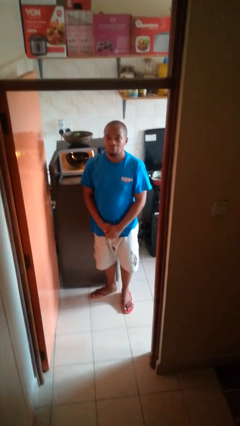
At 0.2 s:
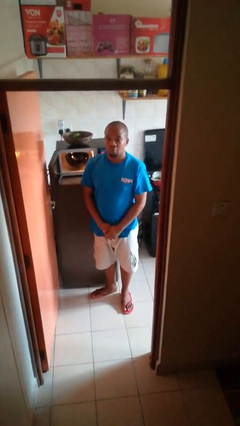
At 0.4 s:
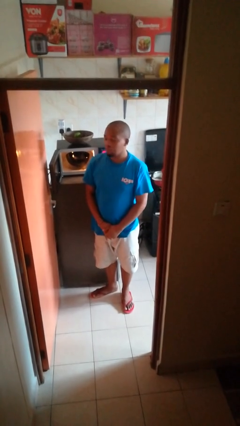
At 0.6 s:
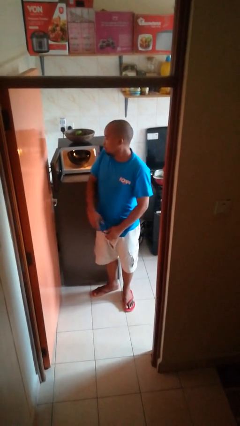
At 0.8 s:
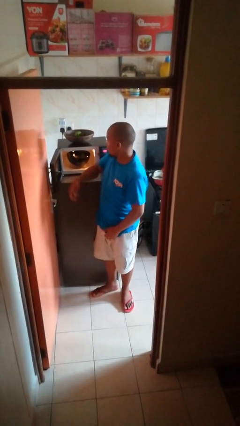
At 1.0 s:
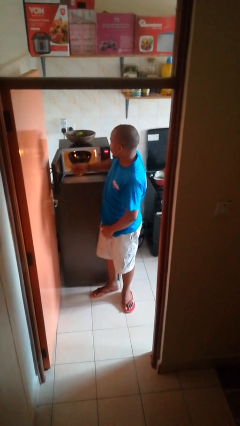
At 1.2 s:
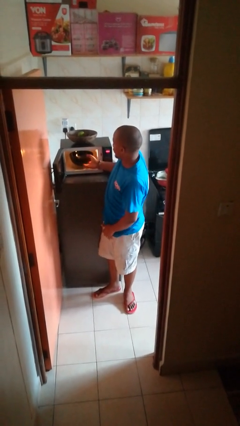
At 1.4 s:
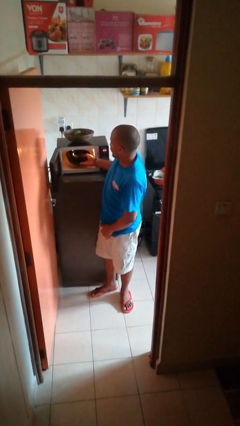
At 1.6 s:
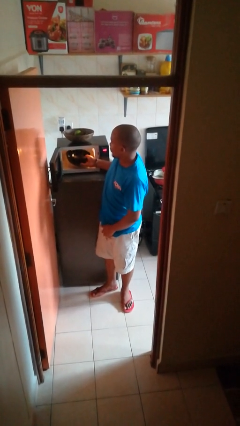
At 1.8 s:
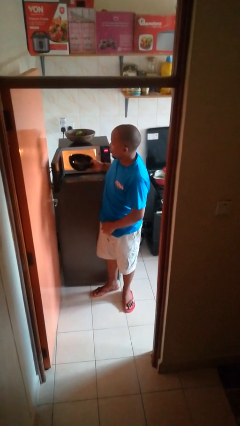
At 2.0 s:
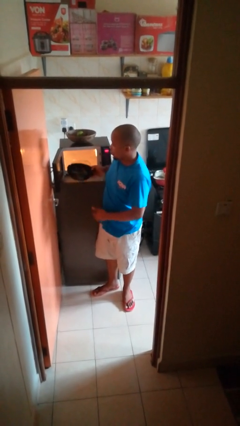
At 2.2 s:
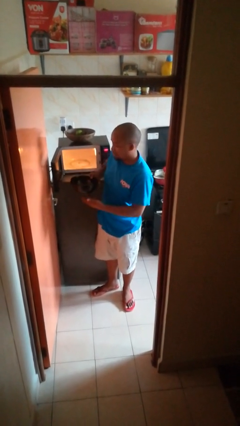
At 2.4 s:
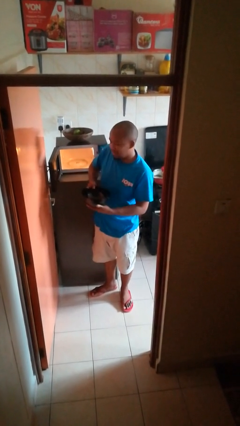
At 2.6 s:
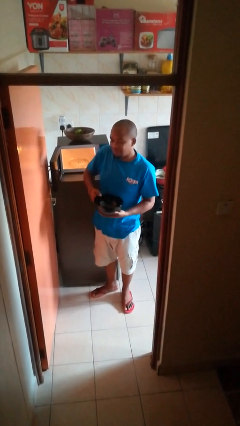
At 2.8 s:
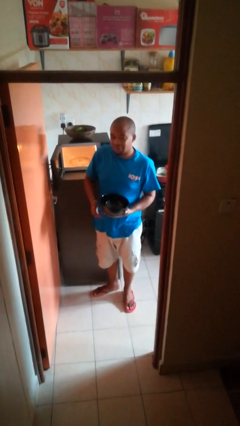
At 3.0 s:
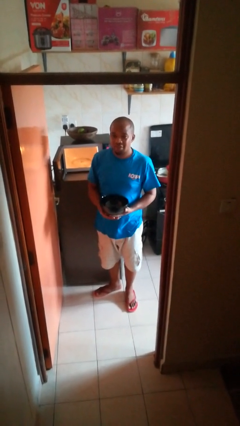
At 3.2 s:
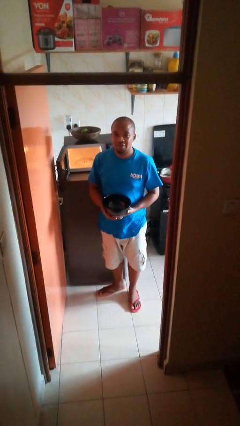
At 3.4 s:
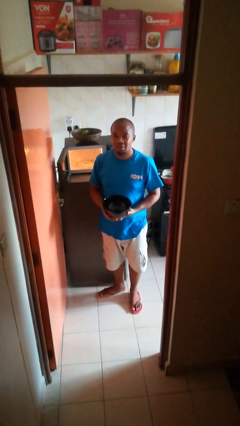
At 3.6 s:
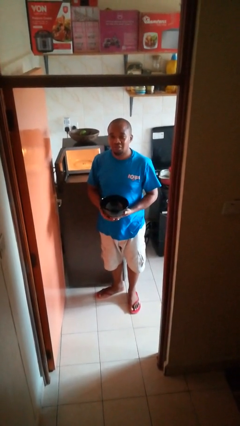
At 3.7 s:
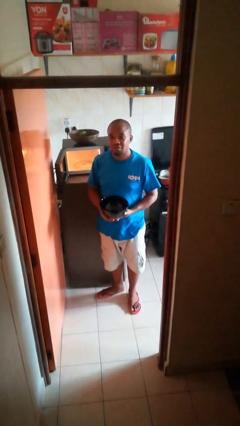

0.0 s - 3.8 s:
person takes object from microwave

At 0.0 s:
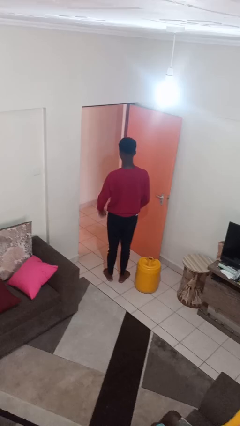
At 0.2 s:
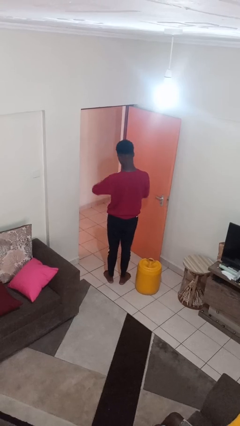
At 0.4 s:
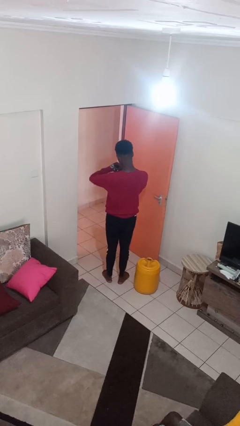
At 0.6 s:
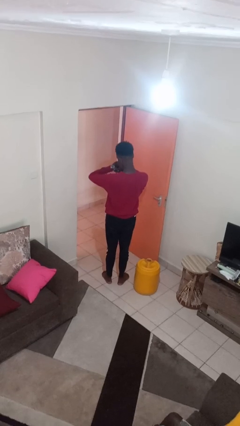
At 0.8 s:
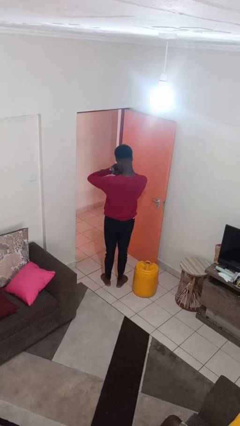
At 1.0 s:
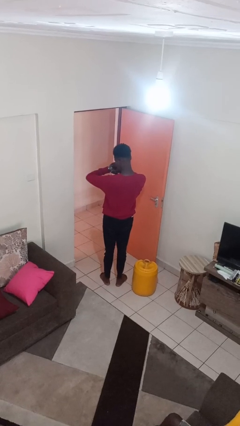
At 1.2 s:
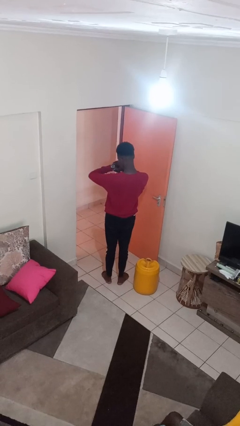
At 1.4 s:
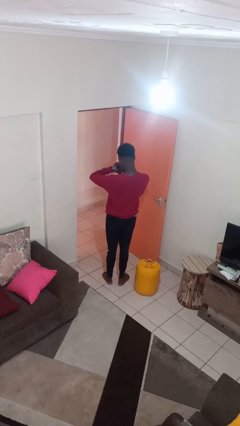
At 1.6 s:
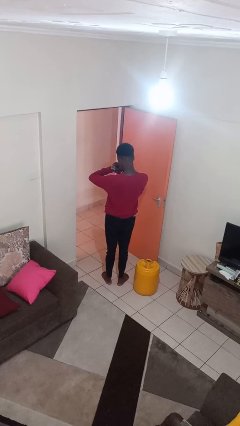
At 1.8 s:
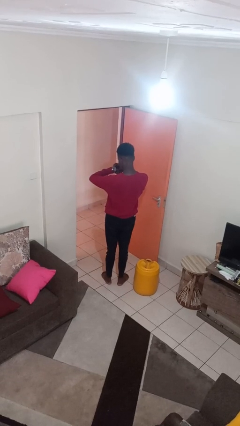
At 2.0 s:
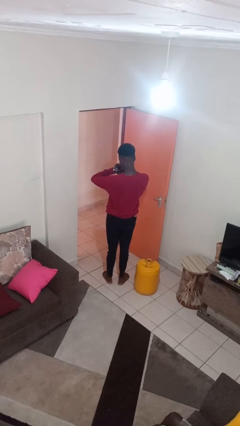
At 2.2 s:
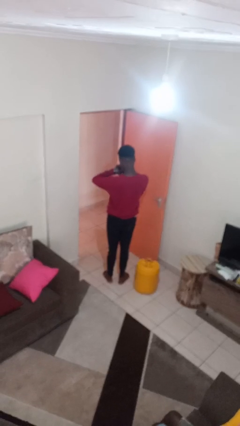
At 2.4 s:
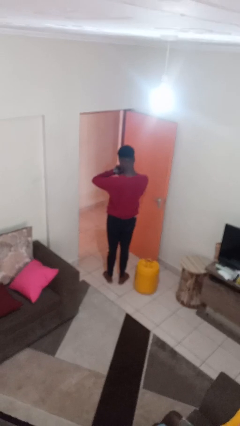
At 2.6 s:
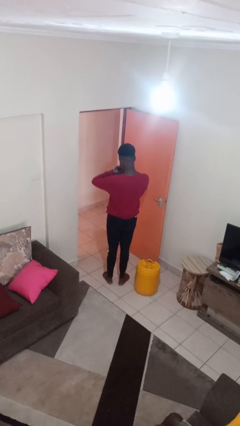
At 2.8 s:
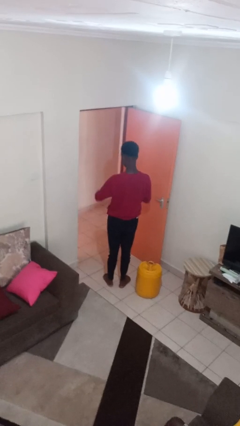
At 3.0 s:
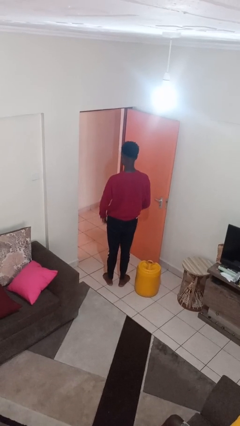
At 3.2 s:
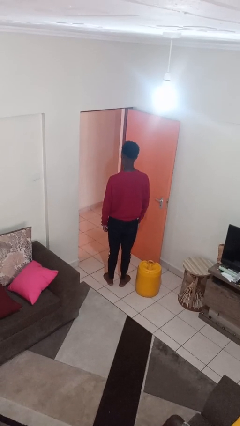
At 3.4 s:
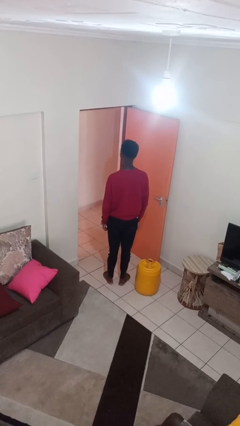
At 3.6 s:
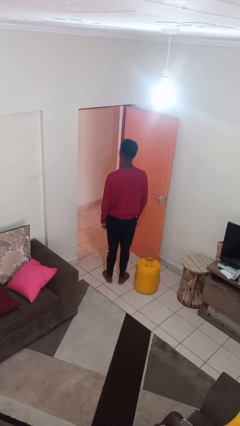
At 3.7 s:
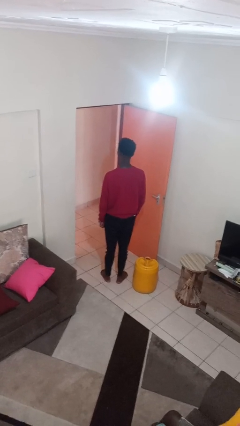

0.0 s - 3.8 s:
person looks at wristwatch

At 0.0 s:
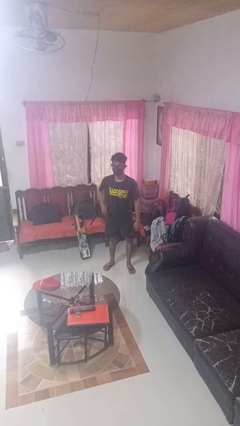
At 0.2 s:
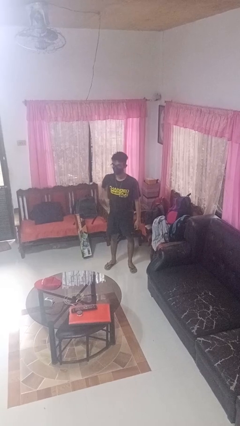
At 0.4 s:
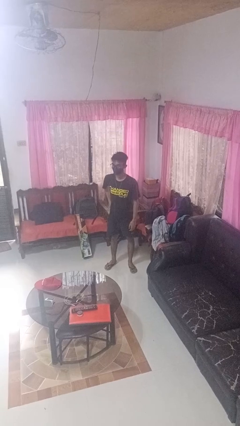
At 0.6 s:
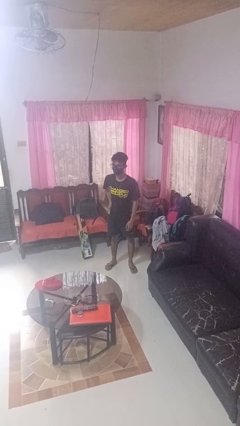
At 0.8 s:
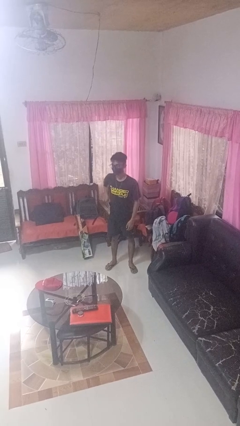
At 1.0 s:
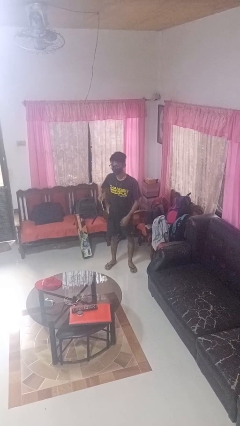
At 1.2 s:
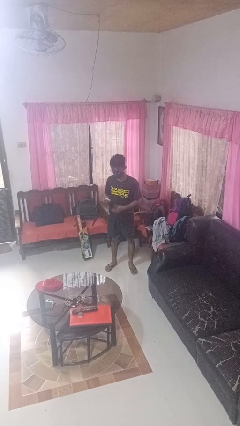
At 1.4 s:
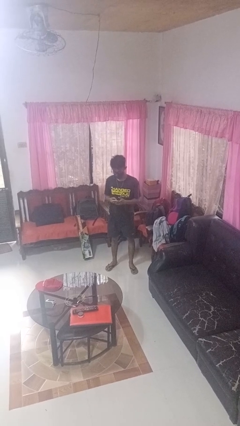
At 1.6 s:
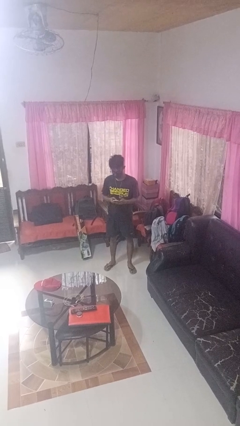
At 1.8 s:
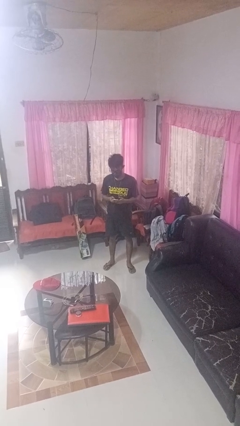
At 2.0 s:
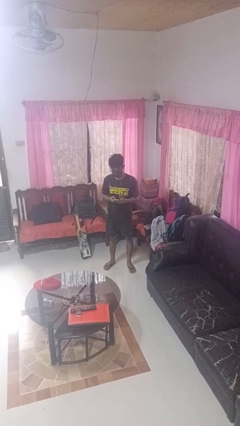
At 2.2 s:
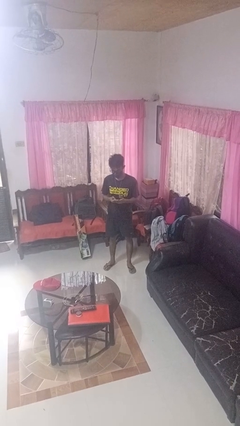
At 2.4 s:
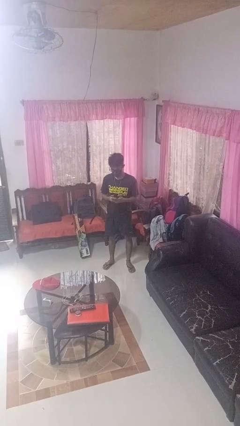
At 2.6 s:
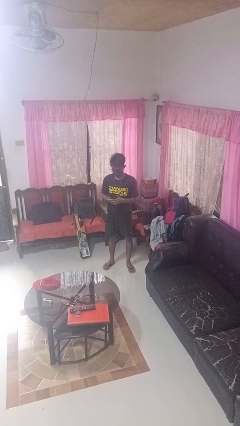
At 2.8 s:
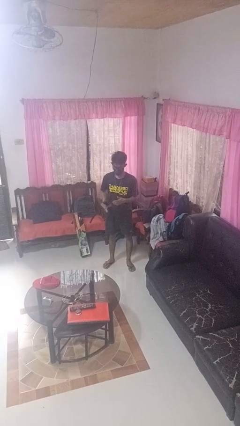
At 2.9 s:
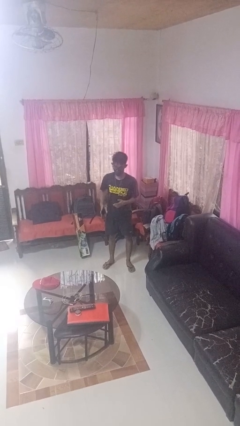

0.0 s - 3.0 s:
person takes phone from pocket

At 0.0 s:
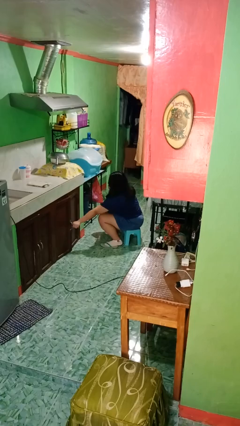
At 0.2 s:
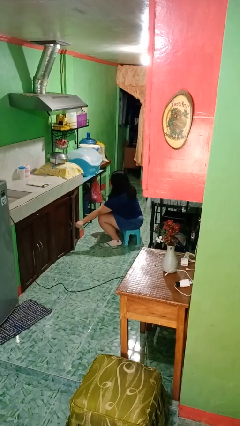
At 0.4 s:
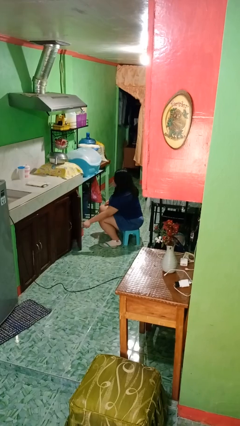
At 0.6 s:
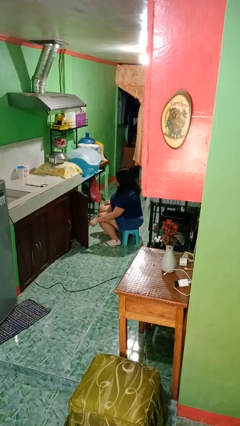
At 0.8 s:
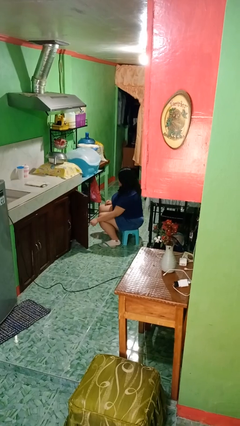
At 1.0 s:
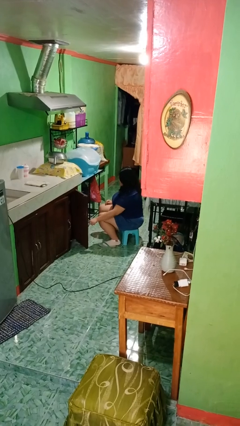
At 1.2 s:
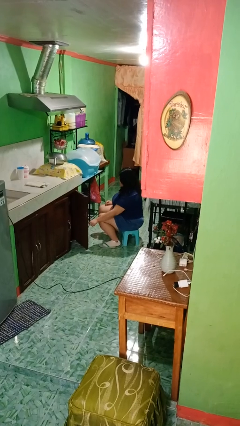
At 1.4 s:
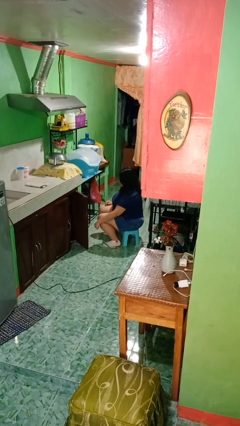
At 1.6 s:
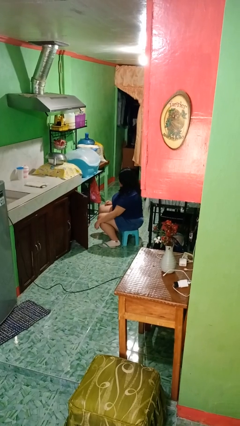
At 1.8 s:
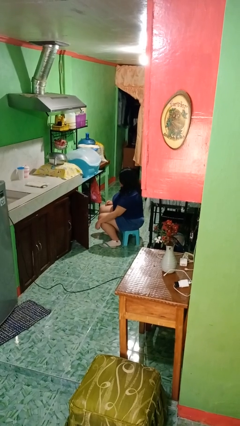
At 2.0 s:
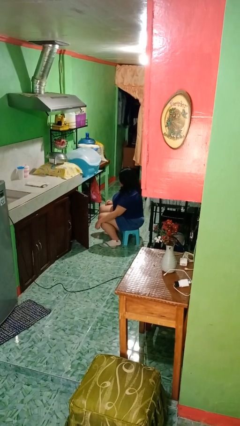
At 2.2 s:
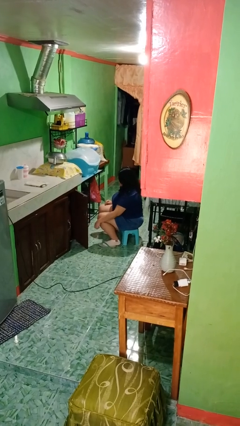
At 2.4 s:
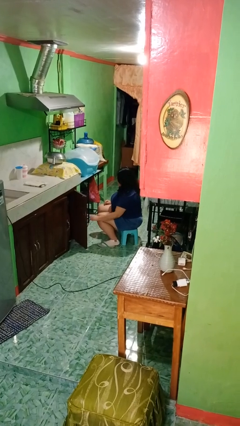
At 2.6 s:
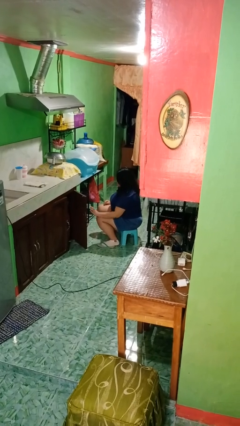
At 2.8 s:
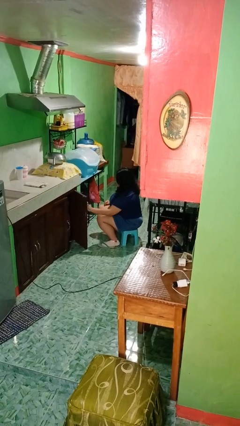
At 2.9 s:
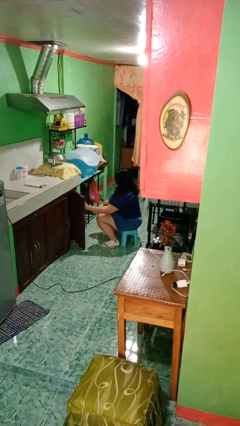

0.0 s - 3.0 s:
person opens cabinet

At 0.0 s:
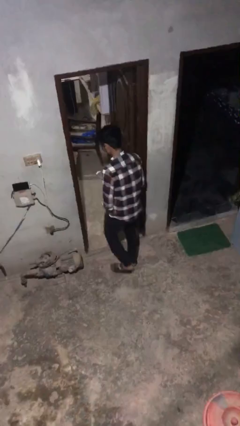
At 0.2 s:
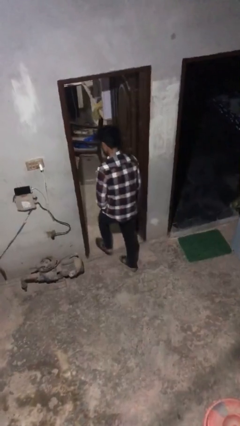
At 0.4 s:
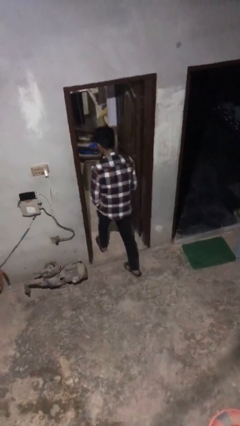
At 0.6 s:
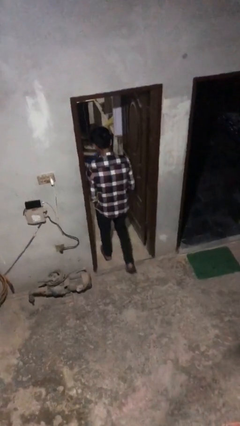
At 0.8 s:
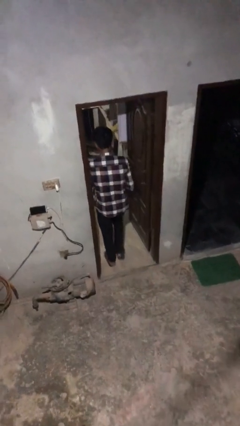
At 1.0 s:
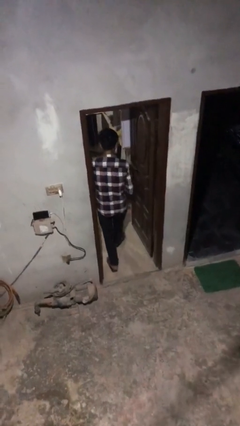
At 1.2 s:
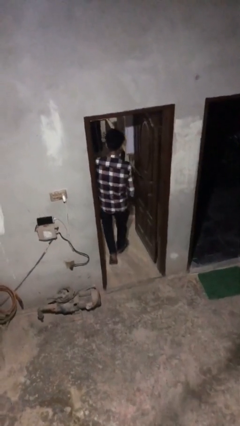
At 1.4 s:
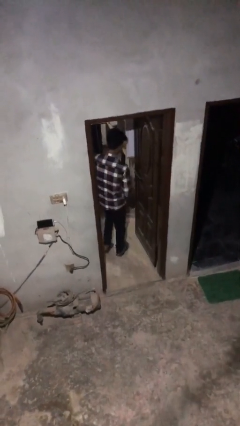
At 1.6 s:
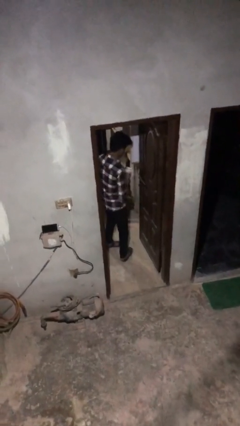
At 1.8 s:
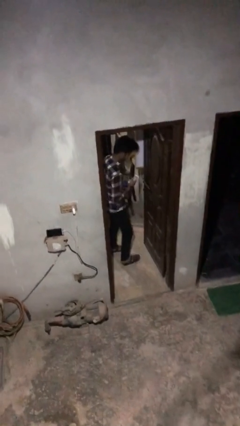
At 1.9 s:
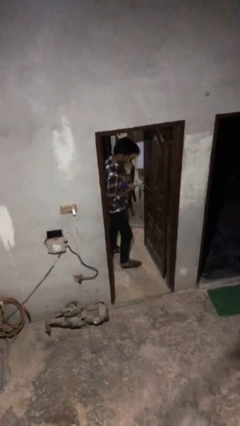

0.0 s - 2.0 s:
person exits scene through structure

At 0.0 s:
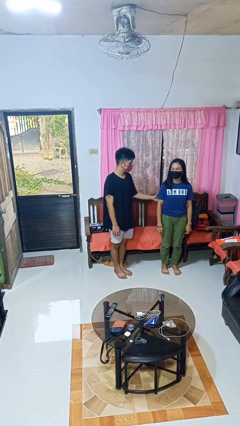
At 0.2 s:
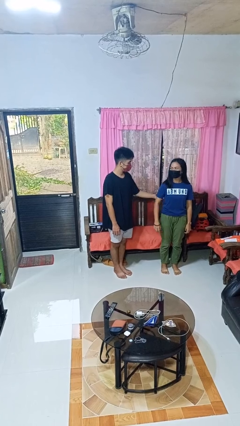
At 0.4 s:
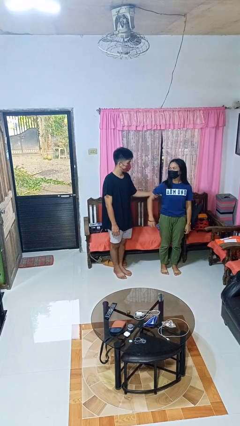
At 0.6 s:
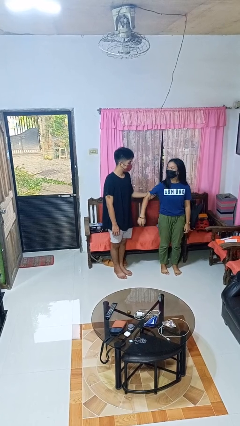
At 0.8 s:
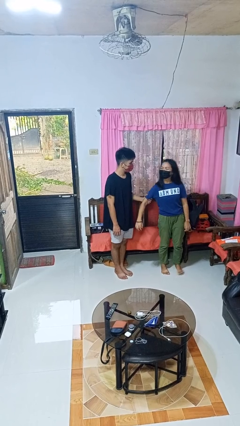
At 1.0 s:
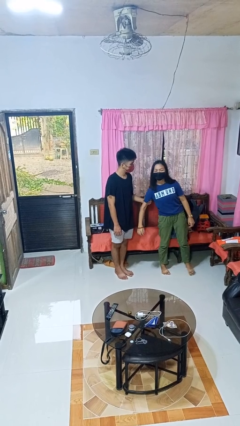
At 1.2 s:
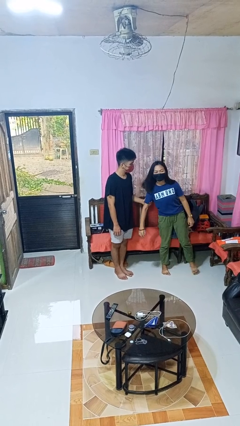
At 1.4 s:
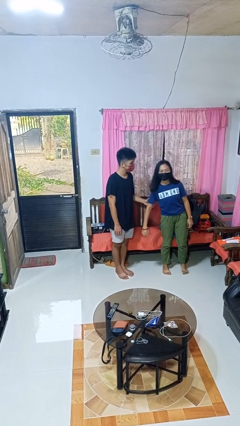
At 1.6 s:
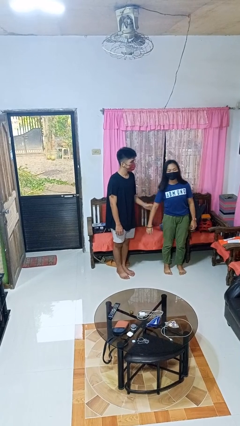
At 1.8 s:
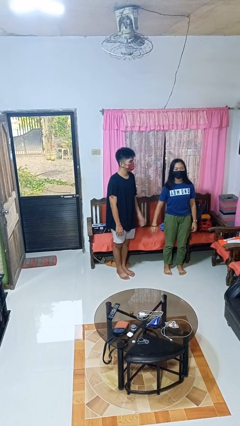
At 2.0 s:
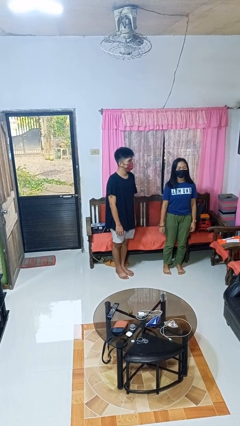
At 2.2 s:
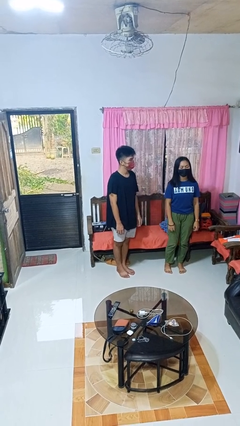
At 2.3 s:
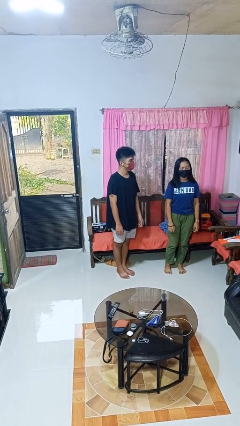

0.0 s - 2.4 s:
person grabs person by bicep
